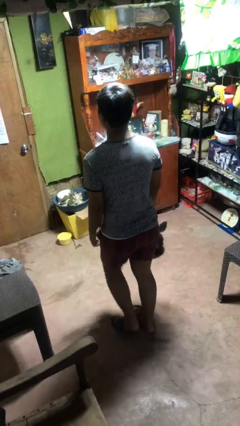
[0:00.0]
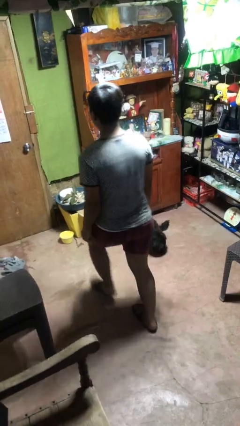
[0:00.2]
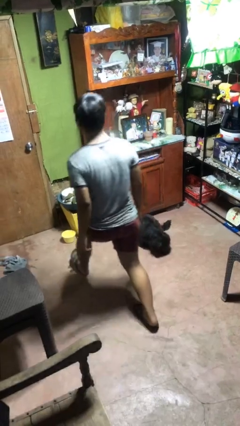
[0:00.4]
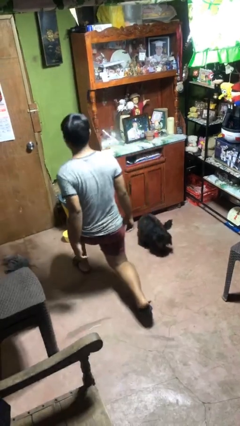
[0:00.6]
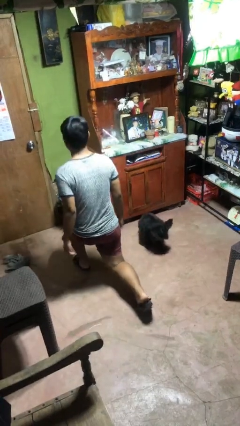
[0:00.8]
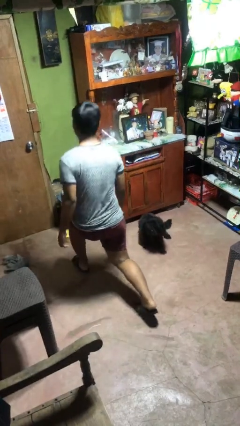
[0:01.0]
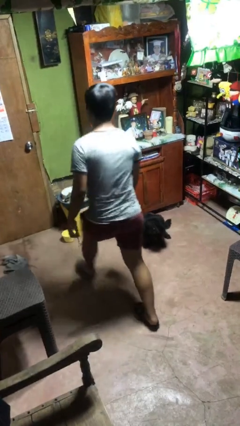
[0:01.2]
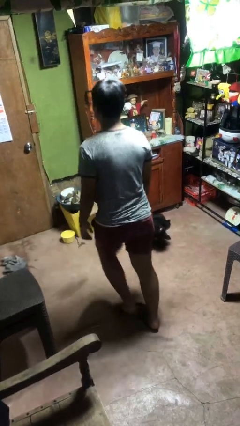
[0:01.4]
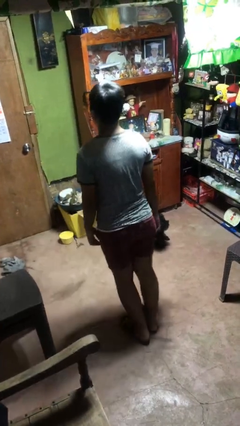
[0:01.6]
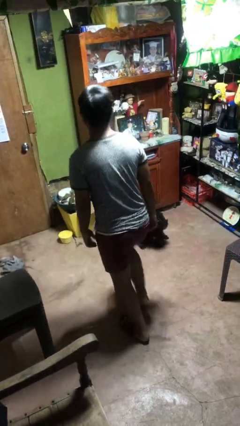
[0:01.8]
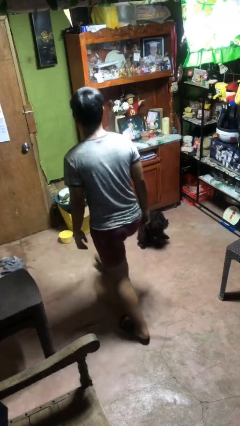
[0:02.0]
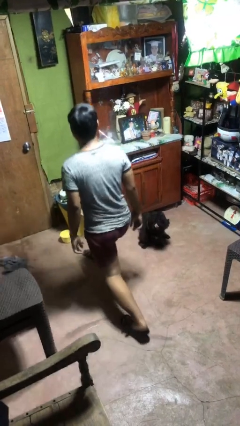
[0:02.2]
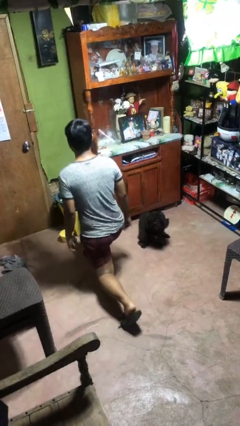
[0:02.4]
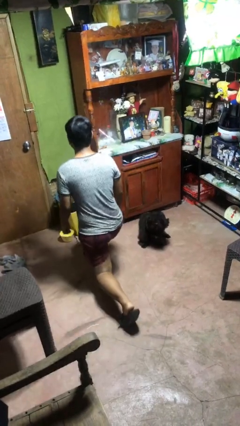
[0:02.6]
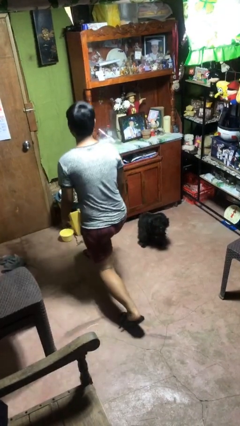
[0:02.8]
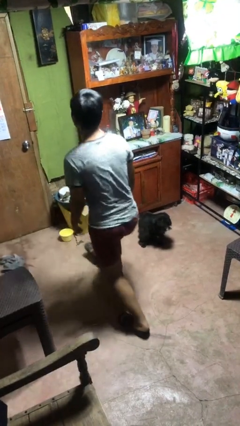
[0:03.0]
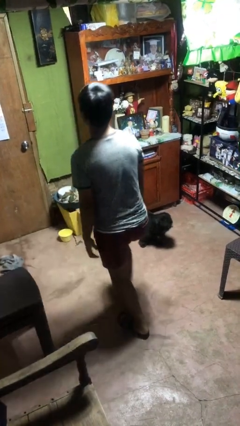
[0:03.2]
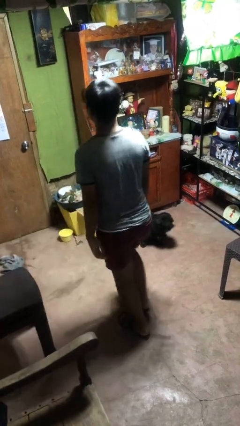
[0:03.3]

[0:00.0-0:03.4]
person exercises with lunges

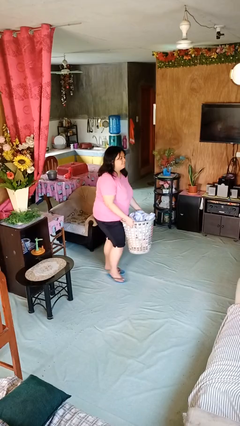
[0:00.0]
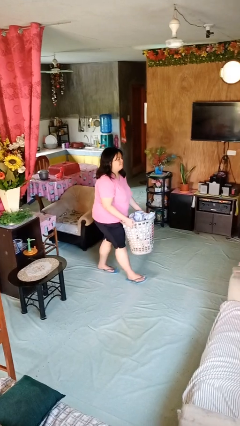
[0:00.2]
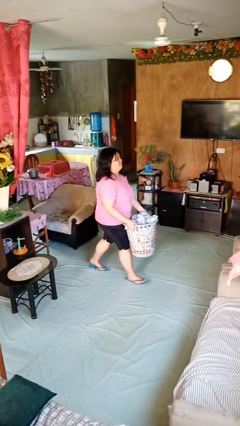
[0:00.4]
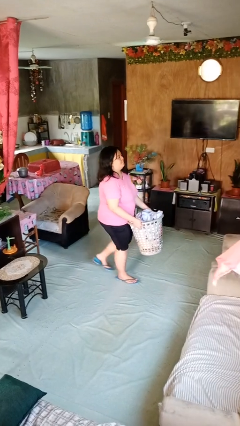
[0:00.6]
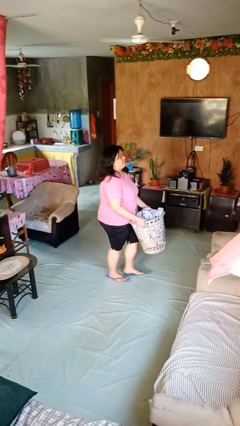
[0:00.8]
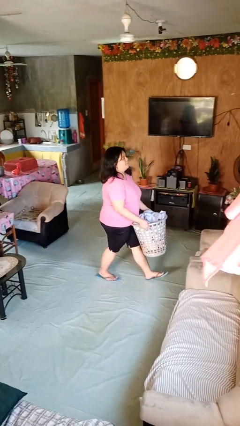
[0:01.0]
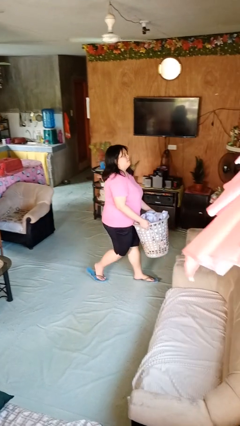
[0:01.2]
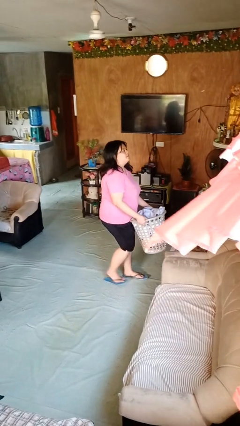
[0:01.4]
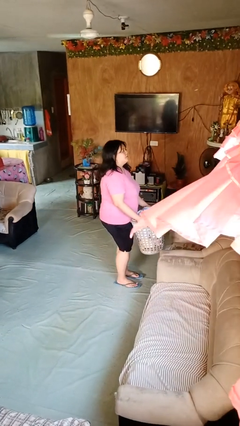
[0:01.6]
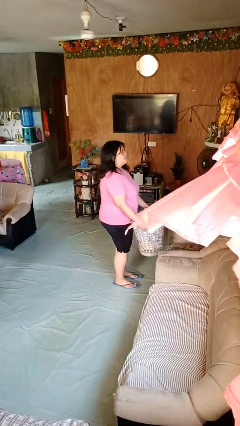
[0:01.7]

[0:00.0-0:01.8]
person carries laundry basket

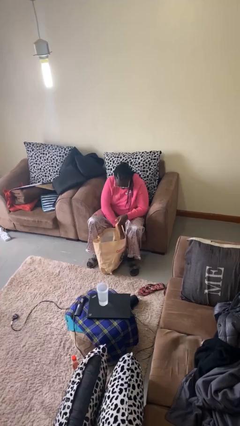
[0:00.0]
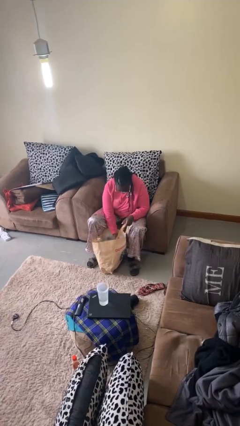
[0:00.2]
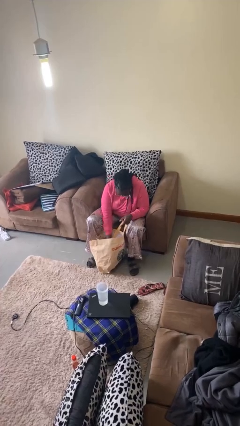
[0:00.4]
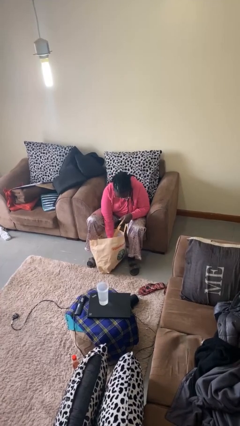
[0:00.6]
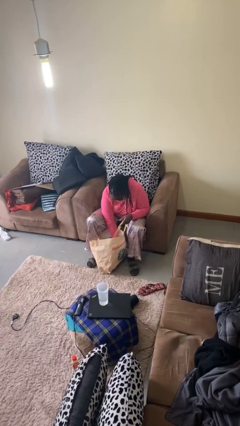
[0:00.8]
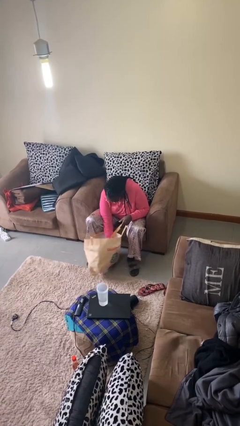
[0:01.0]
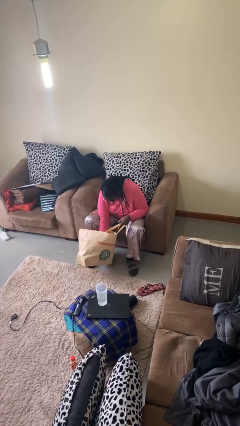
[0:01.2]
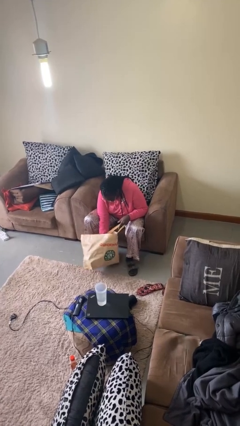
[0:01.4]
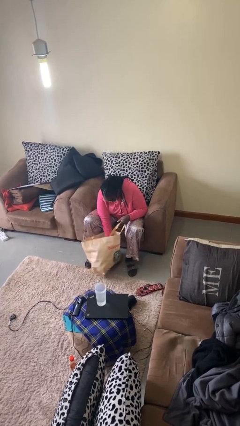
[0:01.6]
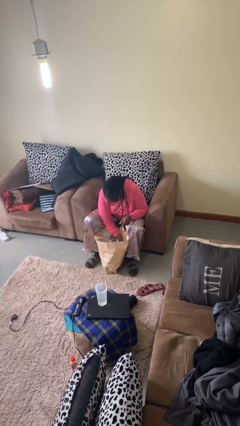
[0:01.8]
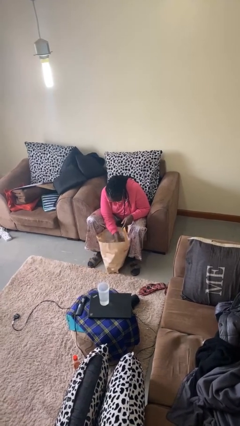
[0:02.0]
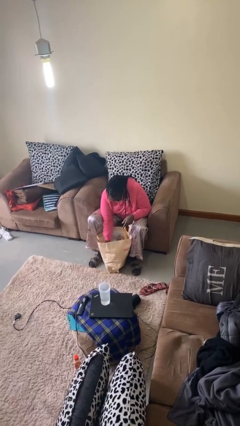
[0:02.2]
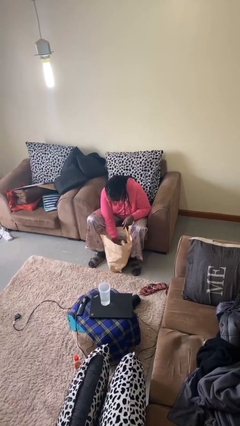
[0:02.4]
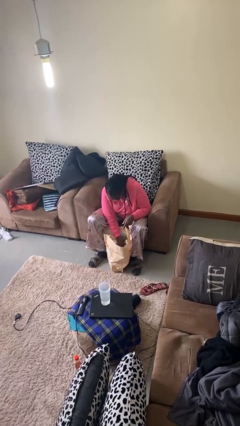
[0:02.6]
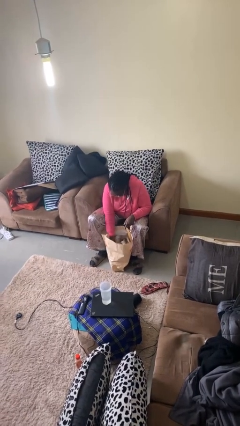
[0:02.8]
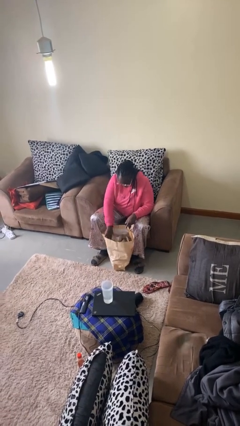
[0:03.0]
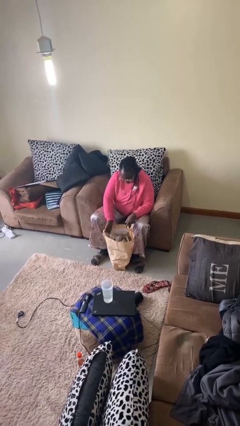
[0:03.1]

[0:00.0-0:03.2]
person searches in bag

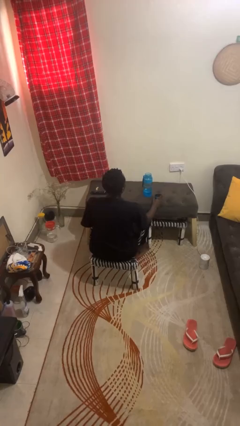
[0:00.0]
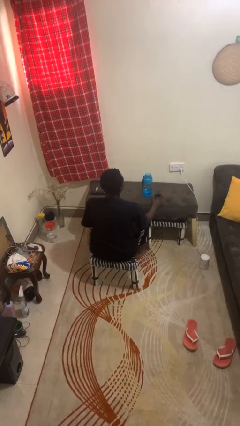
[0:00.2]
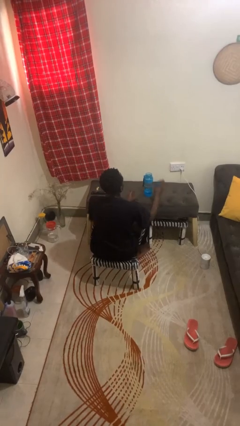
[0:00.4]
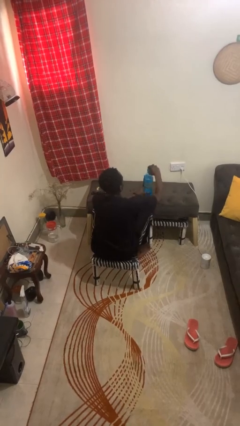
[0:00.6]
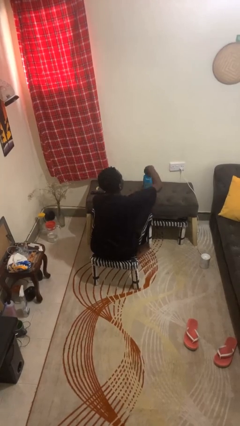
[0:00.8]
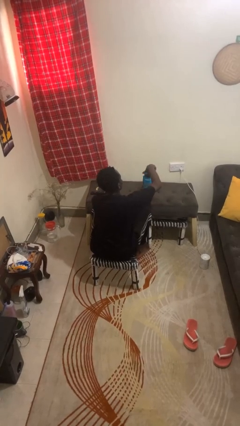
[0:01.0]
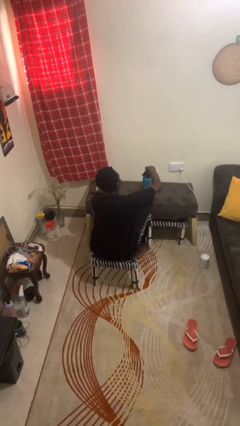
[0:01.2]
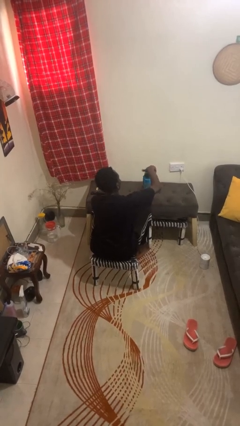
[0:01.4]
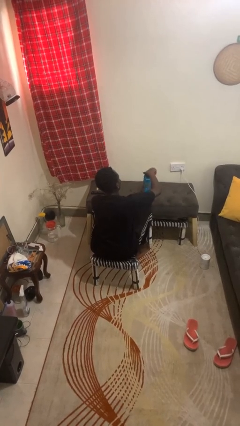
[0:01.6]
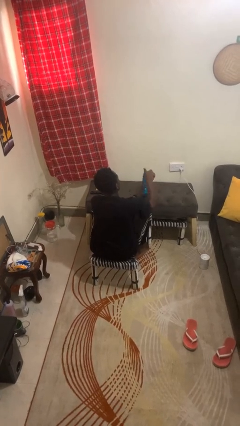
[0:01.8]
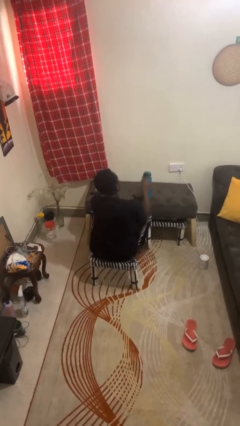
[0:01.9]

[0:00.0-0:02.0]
person closes jar

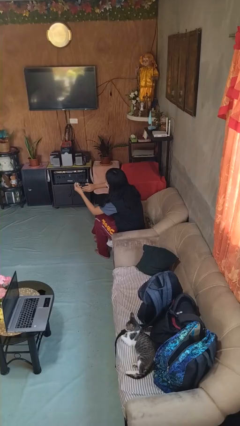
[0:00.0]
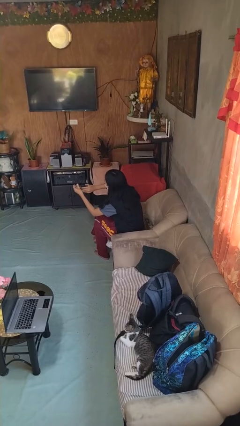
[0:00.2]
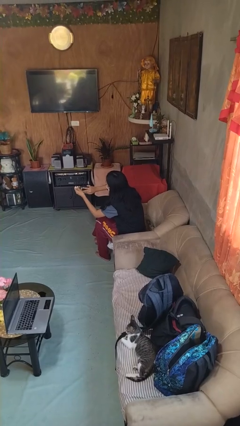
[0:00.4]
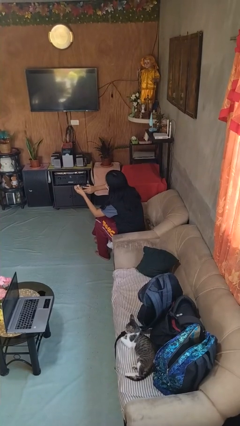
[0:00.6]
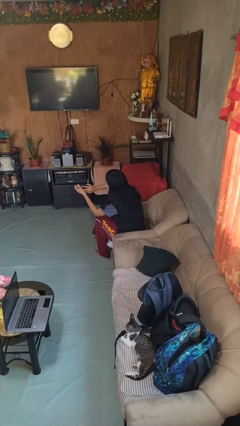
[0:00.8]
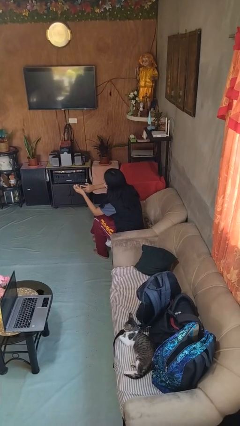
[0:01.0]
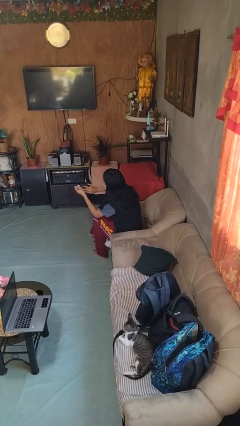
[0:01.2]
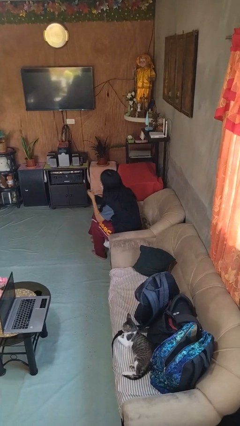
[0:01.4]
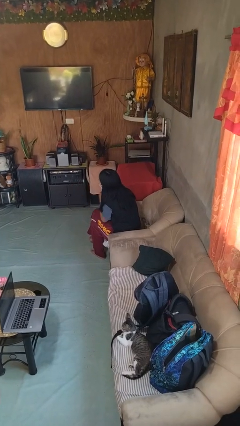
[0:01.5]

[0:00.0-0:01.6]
person clips fingernails

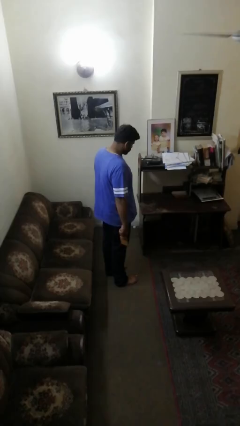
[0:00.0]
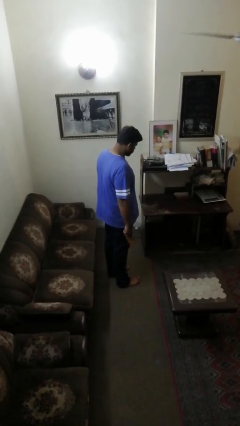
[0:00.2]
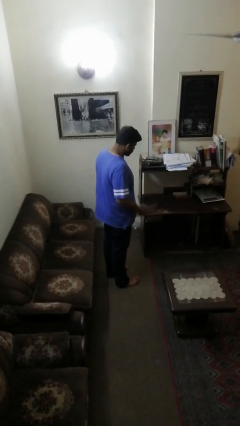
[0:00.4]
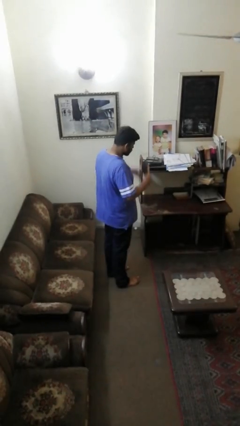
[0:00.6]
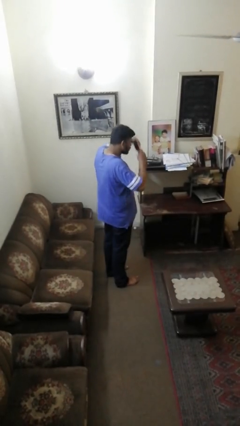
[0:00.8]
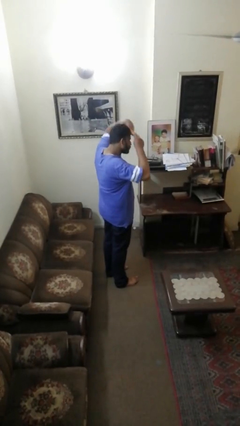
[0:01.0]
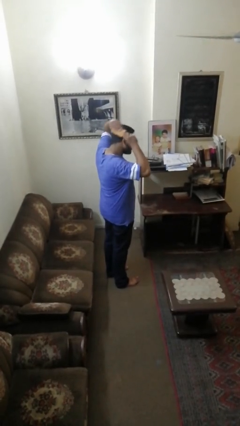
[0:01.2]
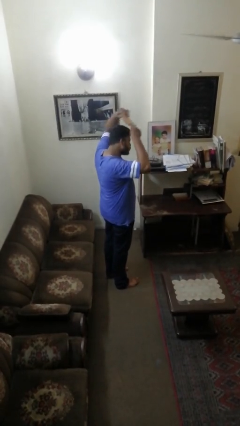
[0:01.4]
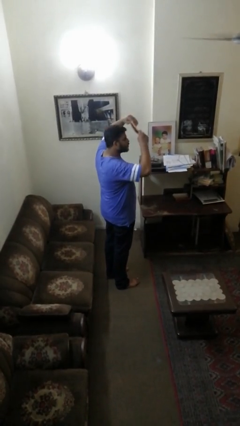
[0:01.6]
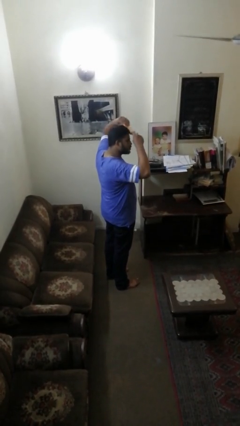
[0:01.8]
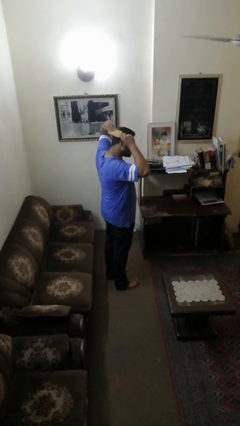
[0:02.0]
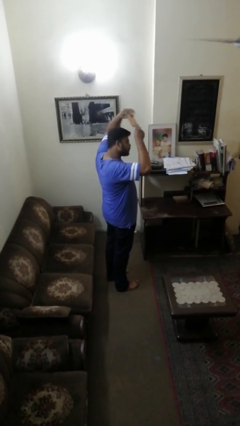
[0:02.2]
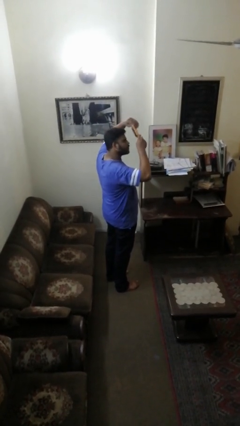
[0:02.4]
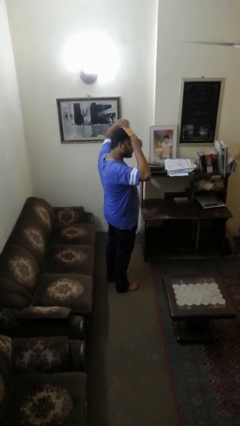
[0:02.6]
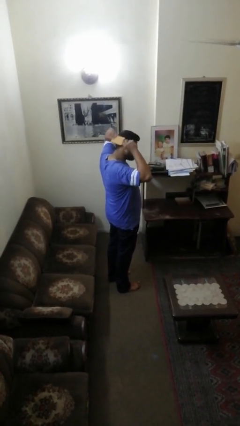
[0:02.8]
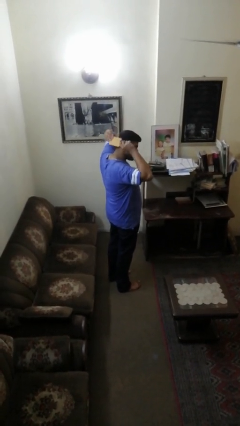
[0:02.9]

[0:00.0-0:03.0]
person brushes hair

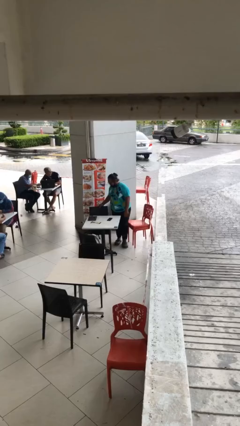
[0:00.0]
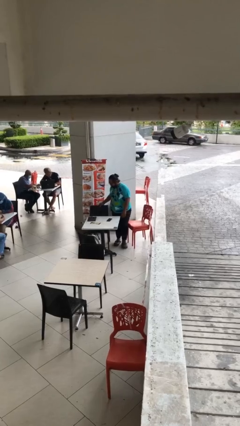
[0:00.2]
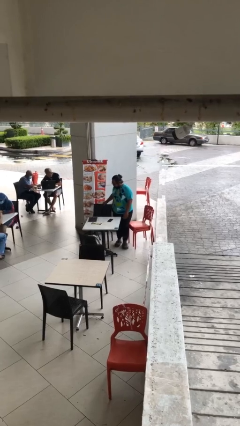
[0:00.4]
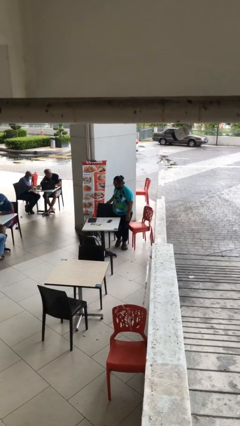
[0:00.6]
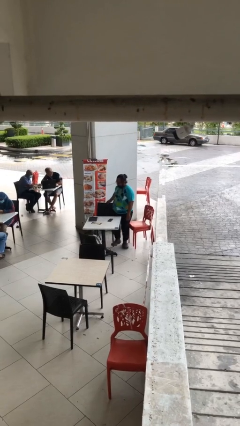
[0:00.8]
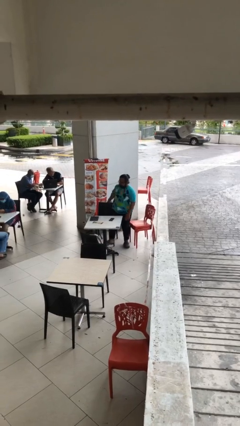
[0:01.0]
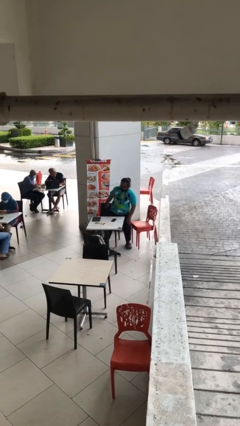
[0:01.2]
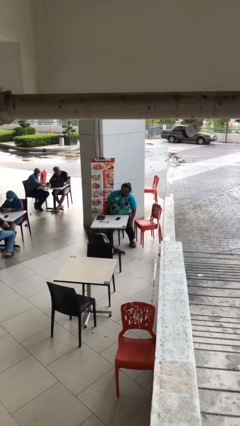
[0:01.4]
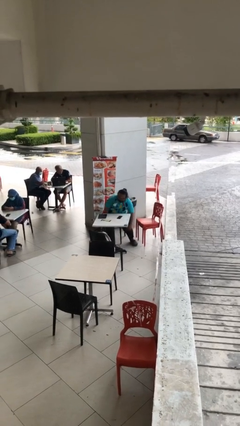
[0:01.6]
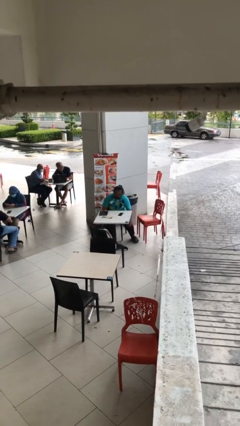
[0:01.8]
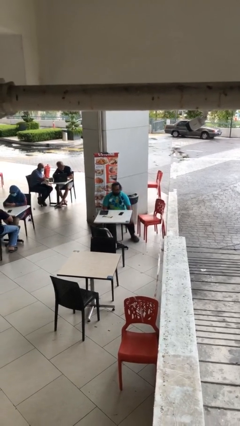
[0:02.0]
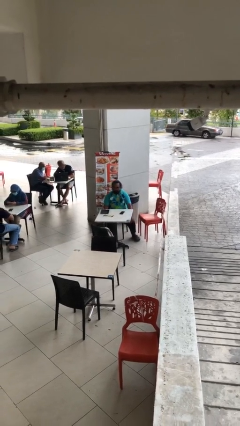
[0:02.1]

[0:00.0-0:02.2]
person sits down
